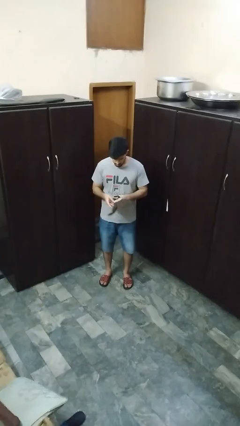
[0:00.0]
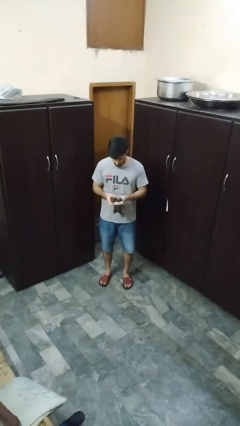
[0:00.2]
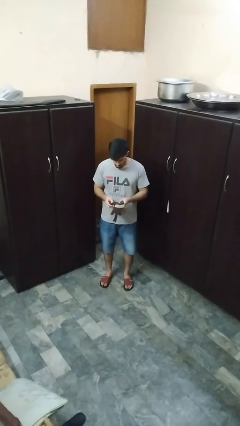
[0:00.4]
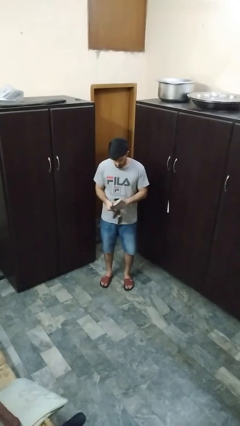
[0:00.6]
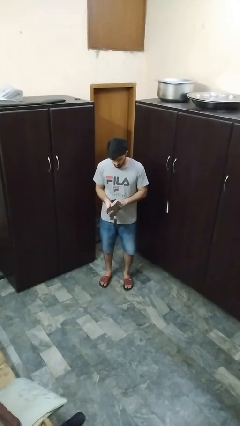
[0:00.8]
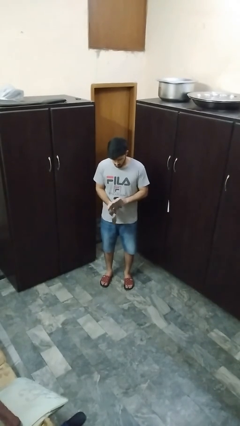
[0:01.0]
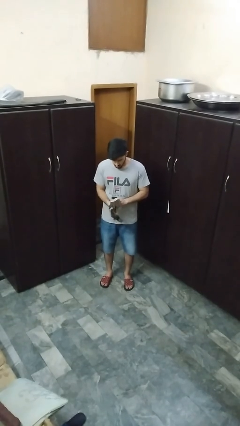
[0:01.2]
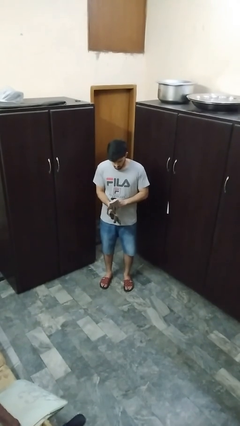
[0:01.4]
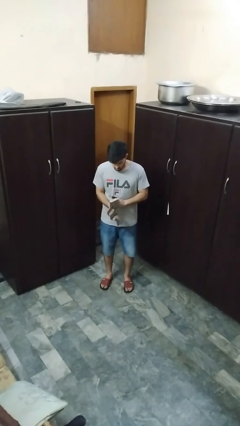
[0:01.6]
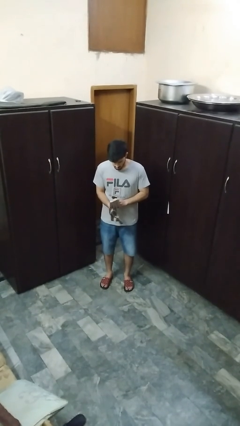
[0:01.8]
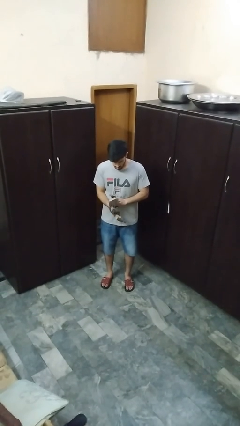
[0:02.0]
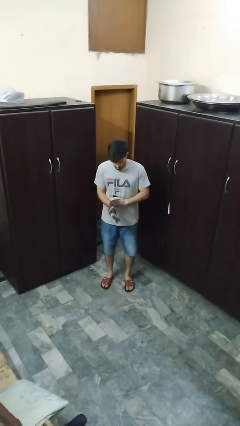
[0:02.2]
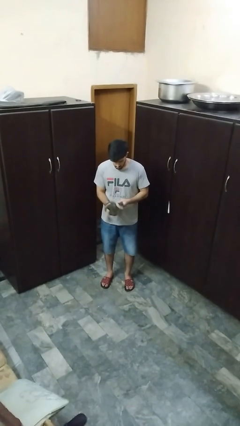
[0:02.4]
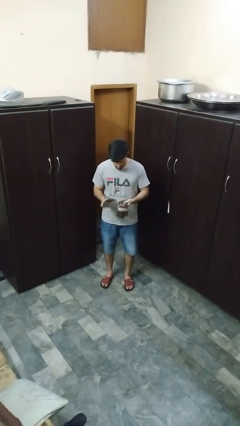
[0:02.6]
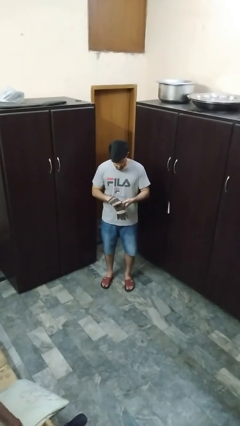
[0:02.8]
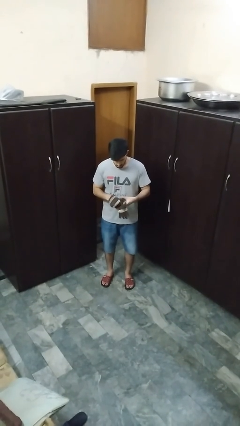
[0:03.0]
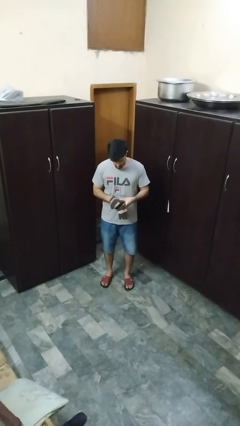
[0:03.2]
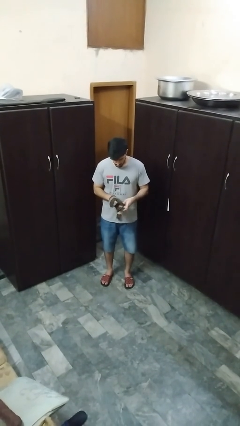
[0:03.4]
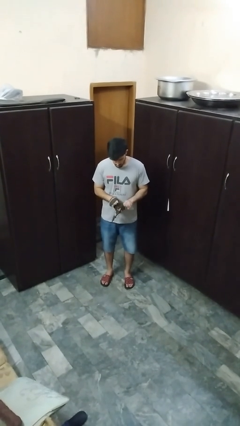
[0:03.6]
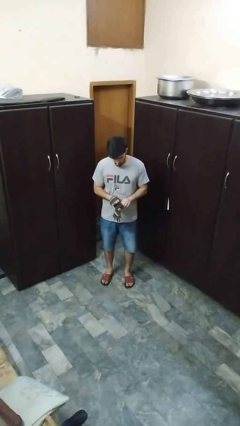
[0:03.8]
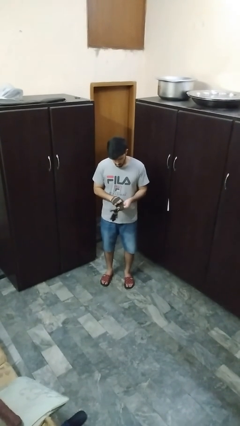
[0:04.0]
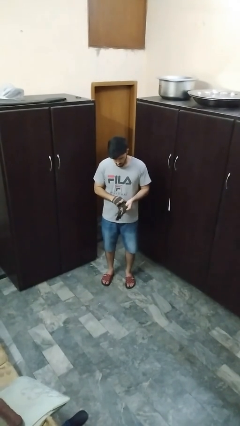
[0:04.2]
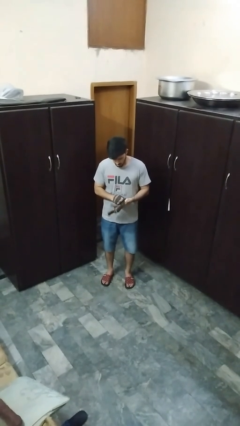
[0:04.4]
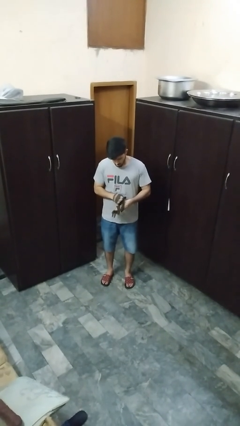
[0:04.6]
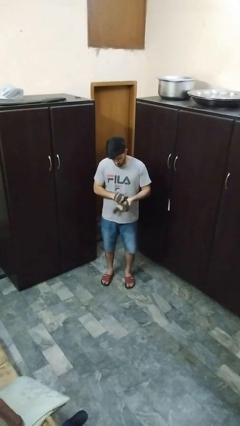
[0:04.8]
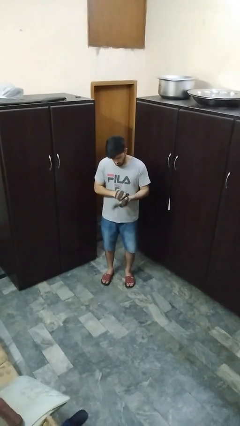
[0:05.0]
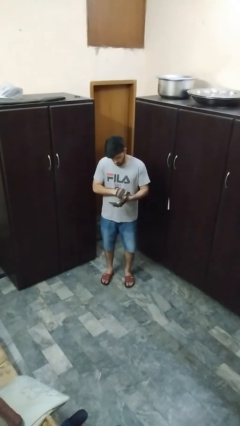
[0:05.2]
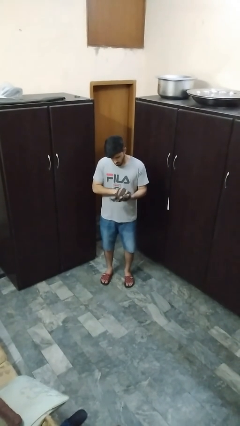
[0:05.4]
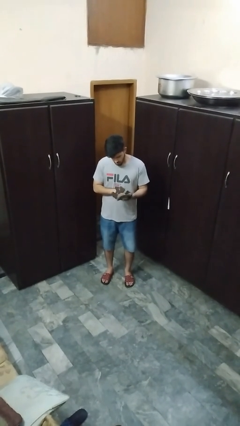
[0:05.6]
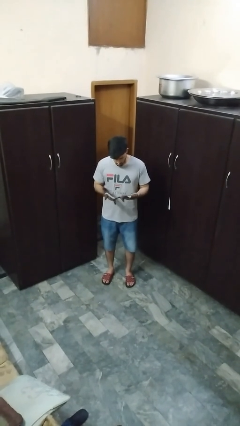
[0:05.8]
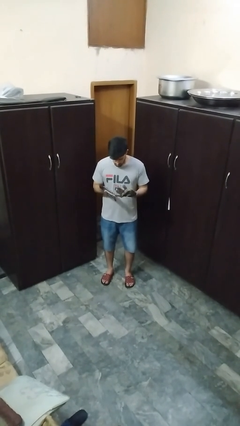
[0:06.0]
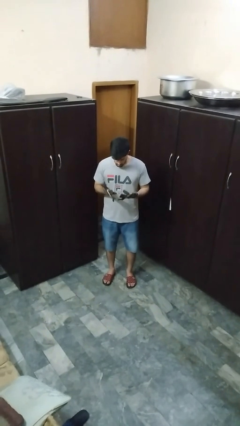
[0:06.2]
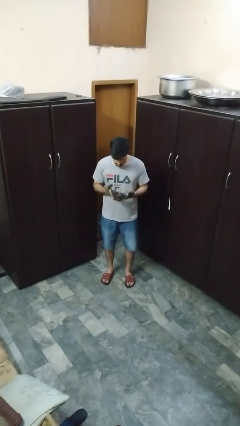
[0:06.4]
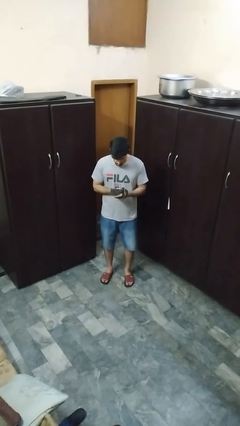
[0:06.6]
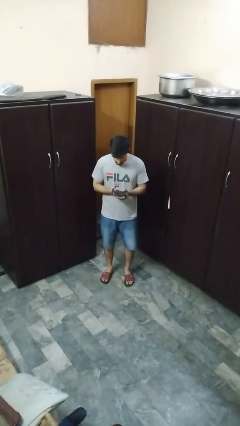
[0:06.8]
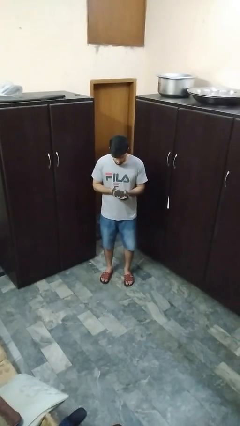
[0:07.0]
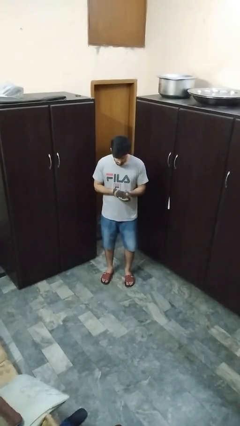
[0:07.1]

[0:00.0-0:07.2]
person puts on gloves

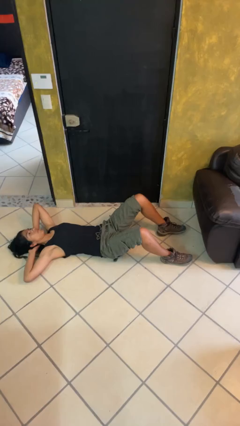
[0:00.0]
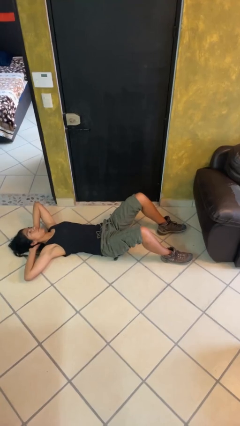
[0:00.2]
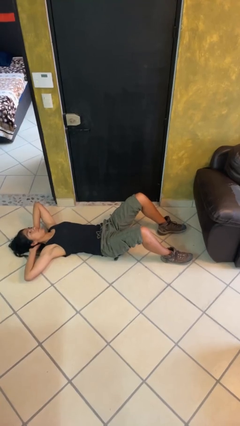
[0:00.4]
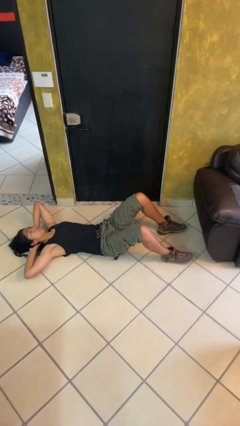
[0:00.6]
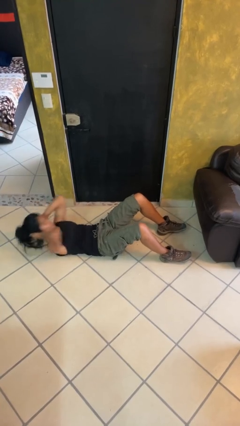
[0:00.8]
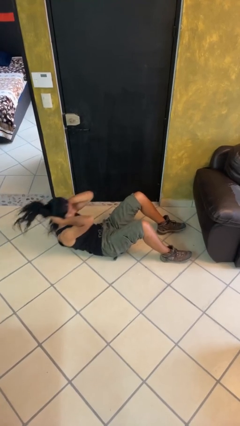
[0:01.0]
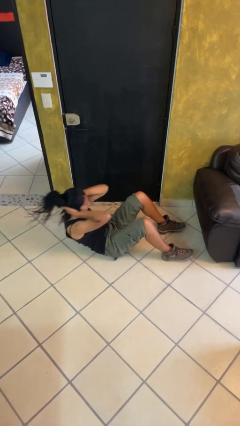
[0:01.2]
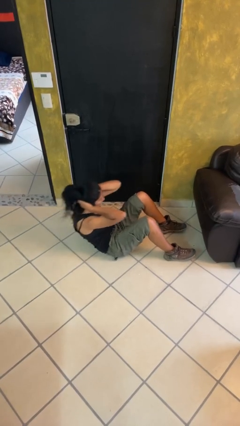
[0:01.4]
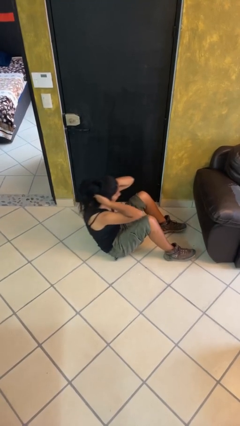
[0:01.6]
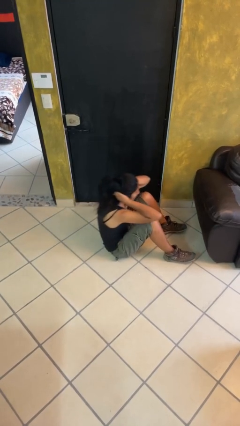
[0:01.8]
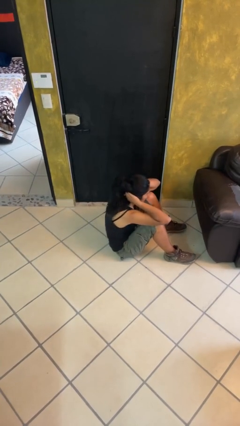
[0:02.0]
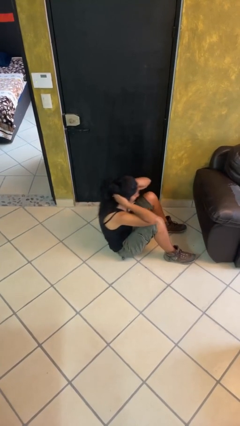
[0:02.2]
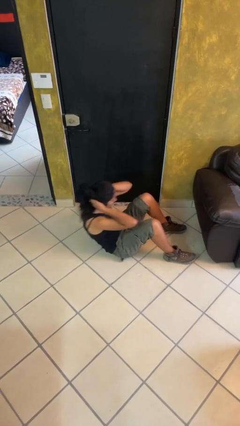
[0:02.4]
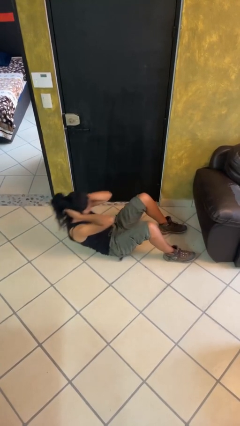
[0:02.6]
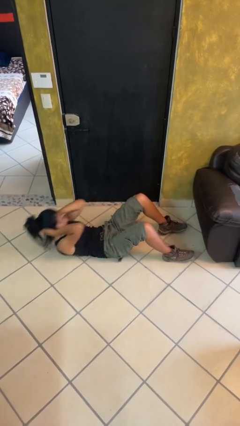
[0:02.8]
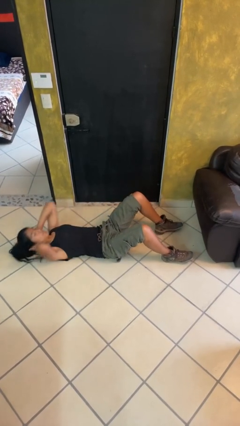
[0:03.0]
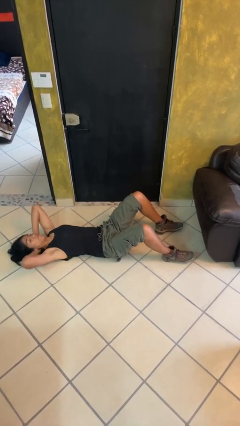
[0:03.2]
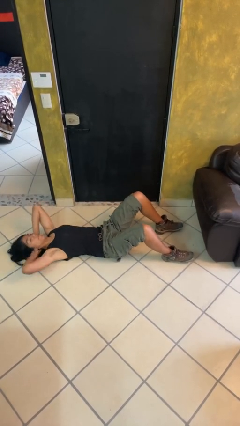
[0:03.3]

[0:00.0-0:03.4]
person exercises with situp

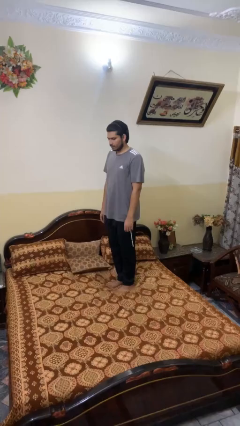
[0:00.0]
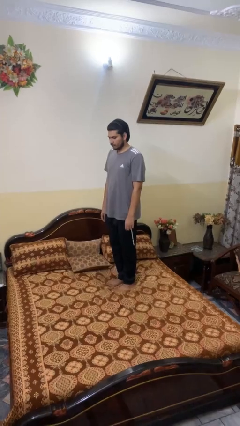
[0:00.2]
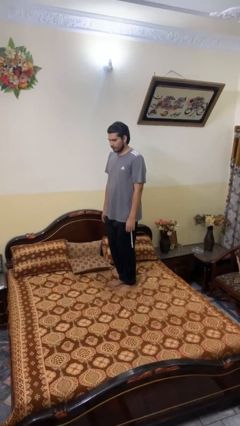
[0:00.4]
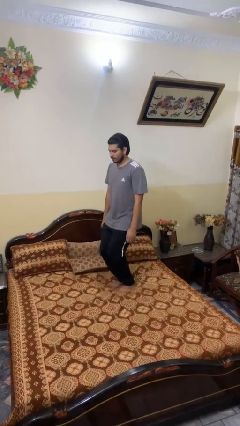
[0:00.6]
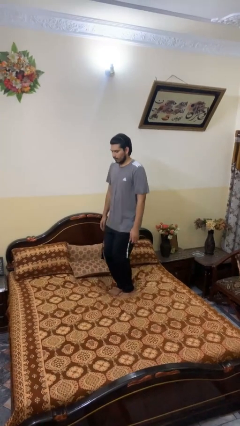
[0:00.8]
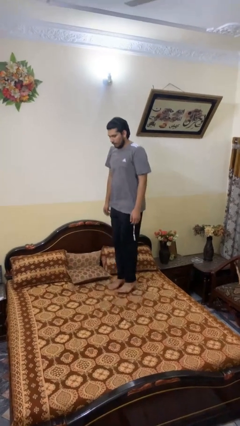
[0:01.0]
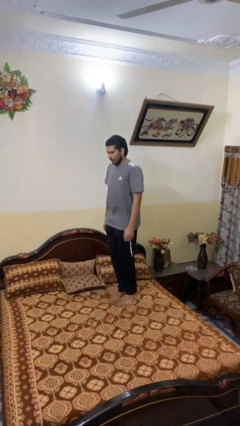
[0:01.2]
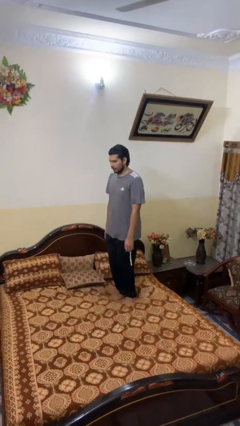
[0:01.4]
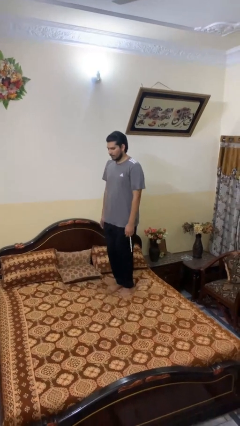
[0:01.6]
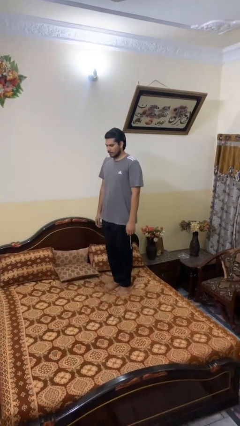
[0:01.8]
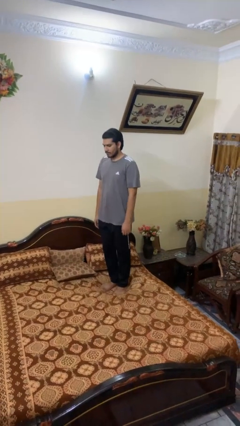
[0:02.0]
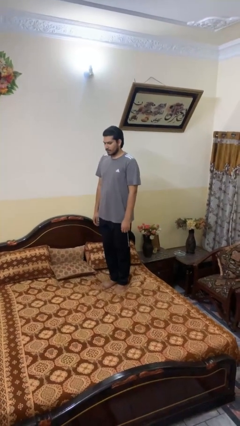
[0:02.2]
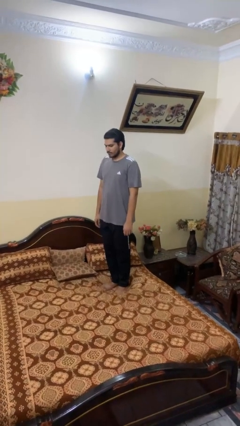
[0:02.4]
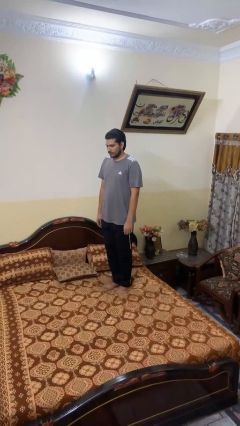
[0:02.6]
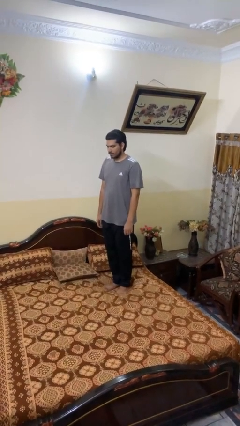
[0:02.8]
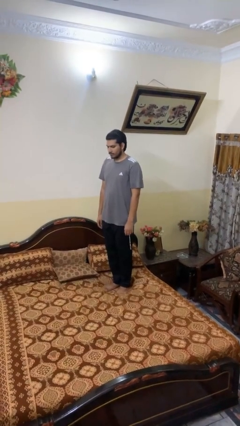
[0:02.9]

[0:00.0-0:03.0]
person jumps on bed

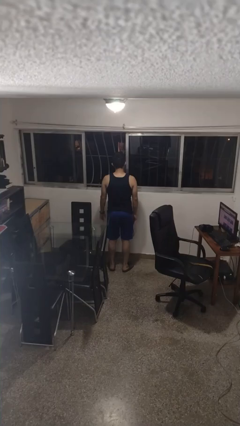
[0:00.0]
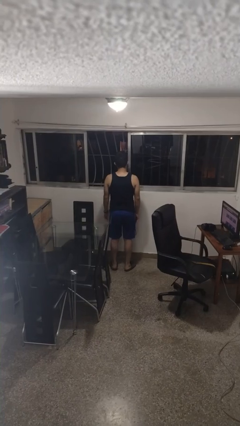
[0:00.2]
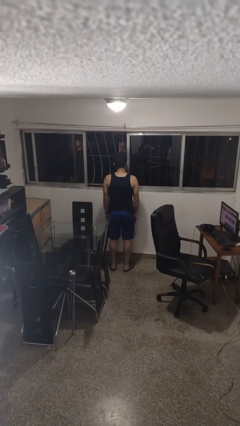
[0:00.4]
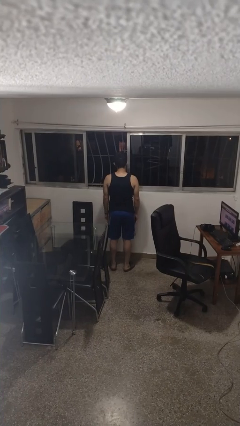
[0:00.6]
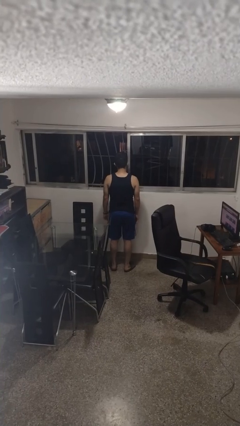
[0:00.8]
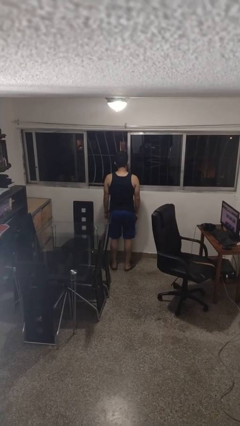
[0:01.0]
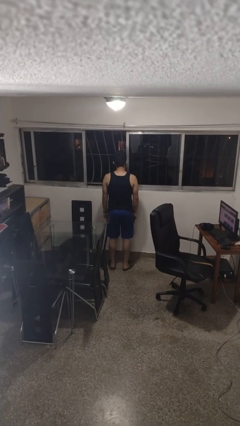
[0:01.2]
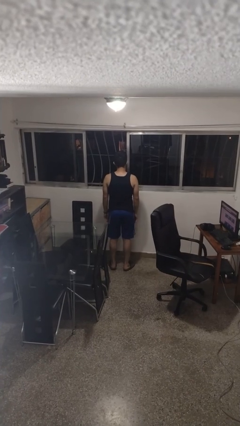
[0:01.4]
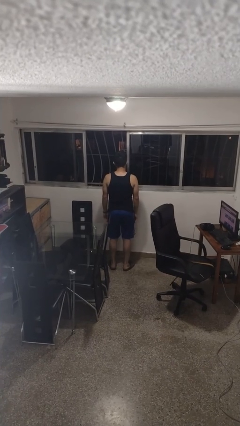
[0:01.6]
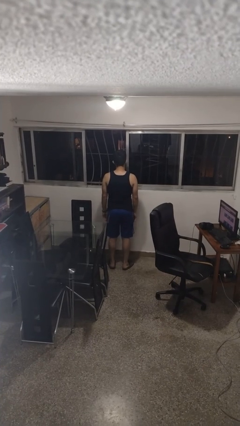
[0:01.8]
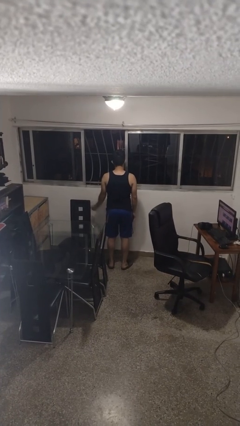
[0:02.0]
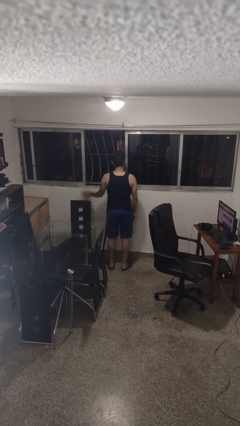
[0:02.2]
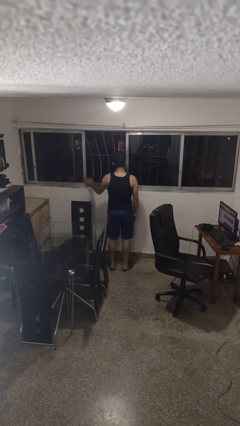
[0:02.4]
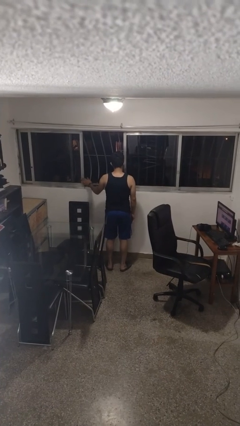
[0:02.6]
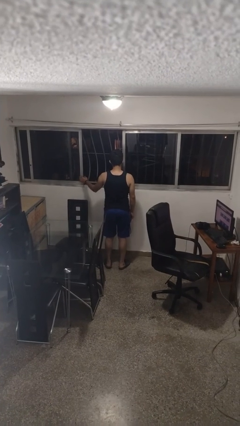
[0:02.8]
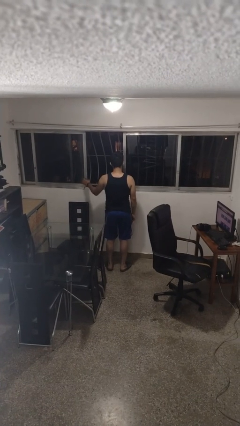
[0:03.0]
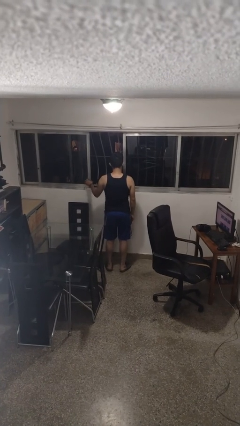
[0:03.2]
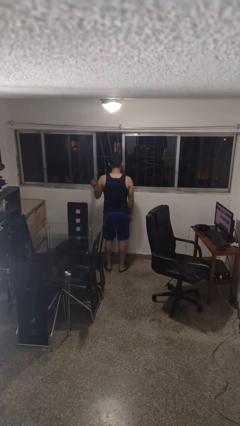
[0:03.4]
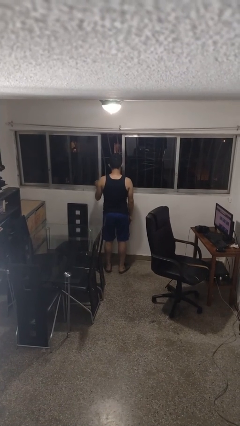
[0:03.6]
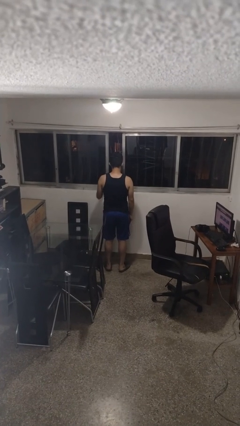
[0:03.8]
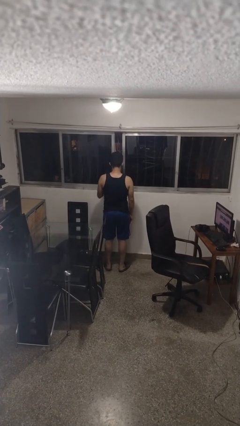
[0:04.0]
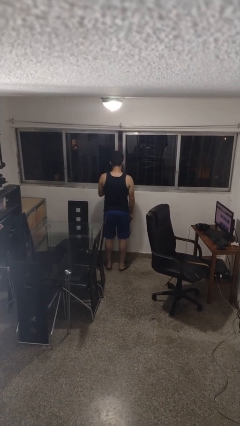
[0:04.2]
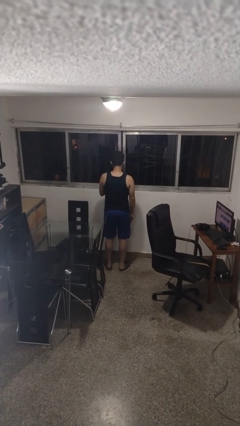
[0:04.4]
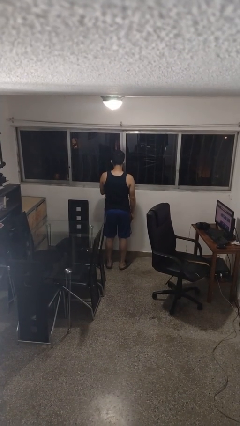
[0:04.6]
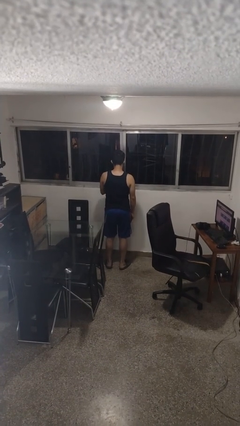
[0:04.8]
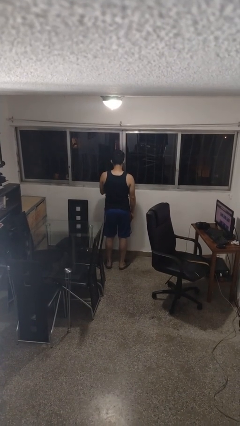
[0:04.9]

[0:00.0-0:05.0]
person closes home window
